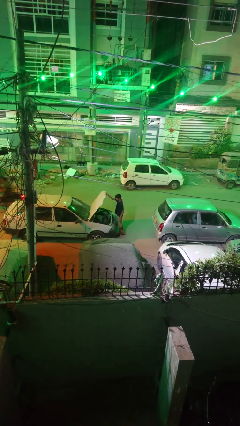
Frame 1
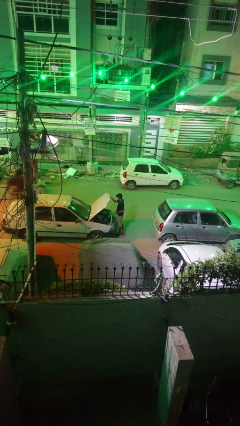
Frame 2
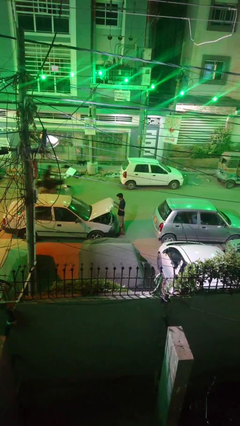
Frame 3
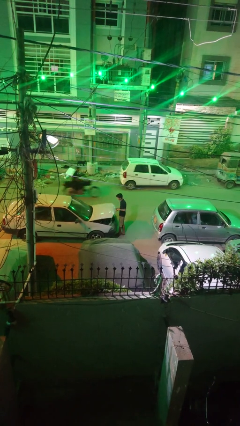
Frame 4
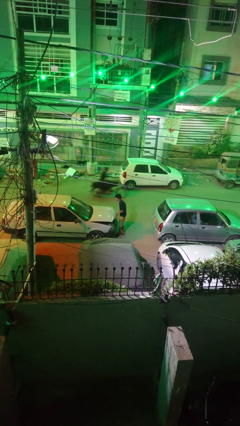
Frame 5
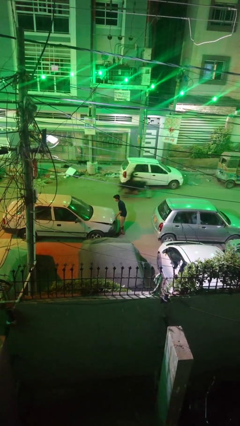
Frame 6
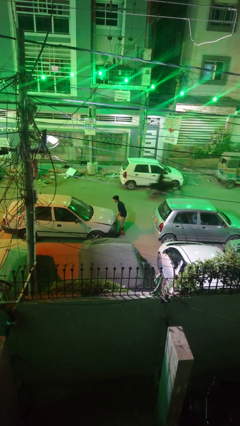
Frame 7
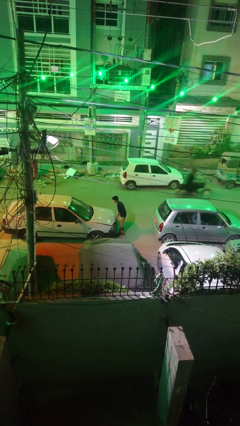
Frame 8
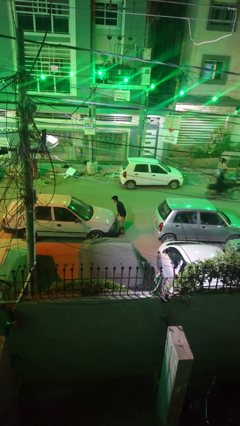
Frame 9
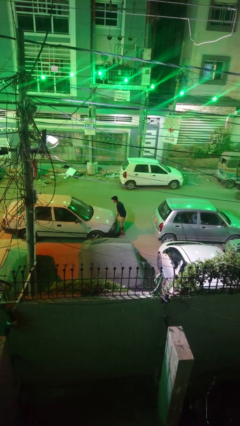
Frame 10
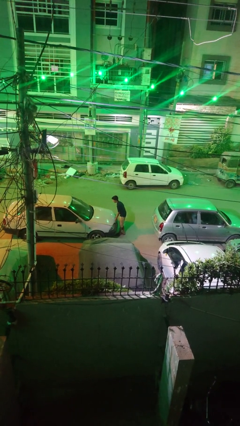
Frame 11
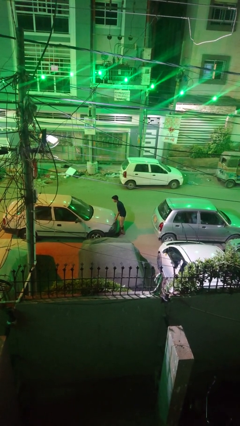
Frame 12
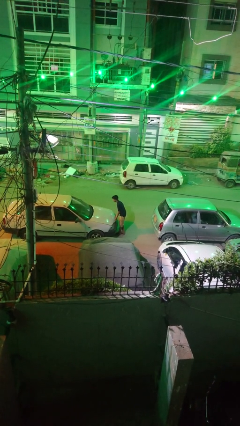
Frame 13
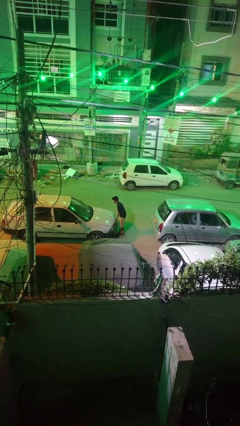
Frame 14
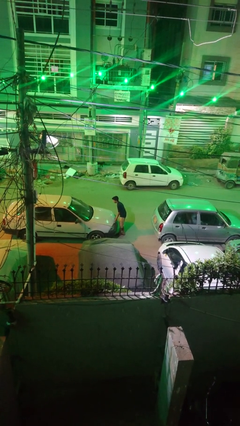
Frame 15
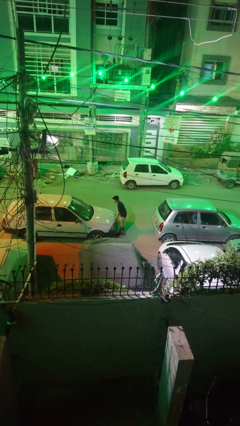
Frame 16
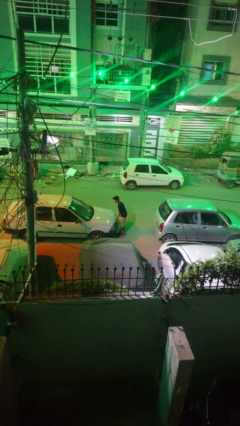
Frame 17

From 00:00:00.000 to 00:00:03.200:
person closes car hood

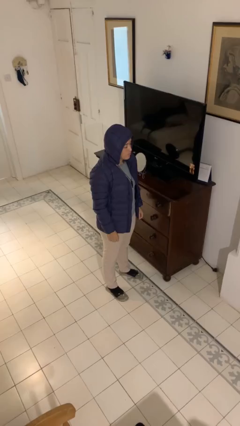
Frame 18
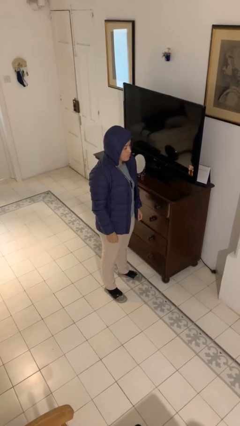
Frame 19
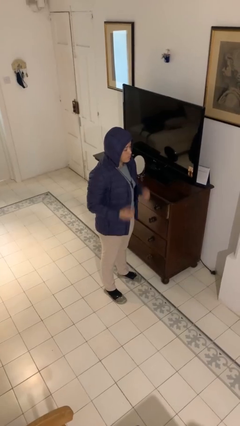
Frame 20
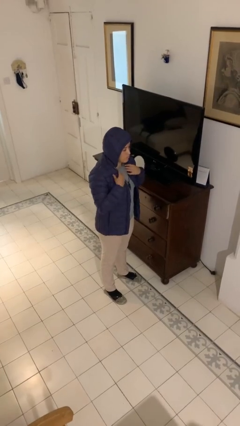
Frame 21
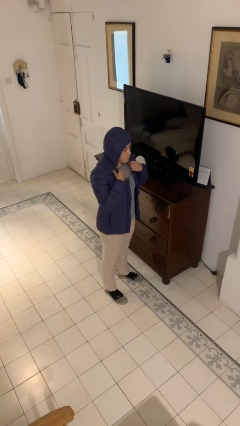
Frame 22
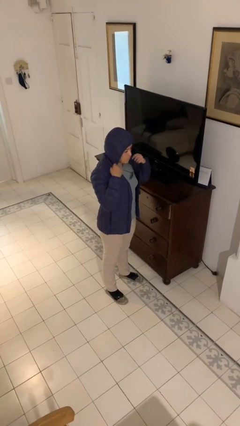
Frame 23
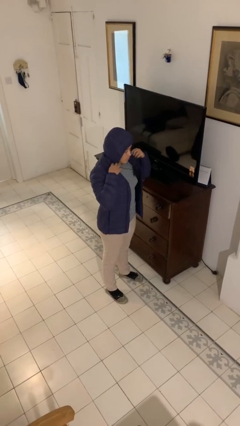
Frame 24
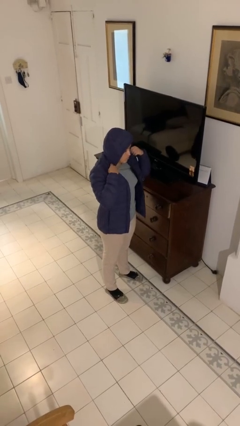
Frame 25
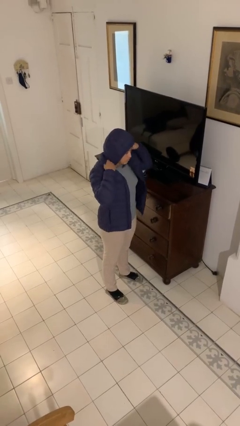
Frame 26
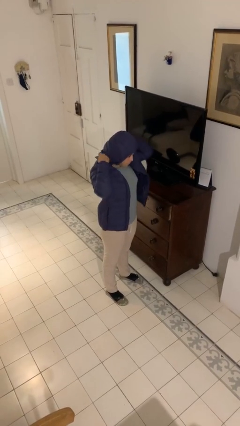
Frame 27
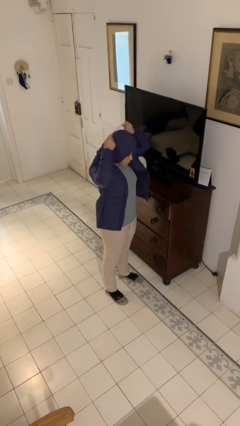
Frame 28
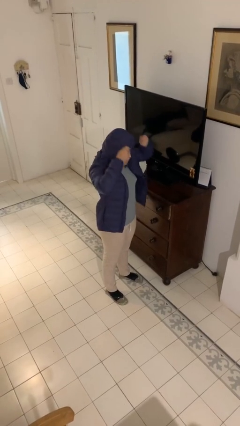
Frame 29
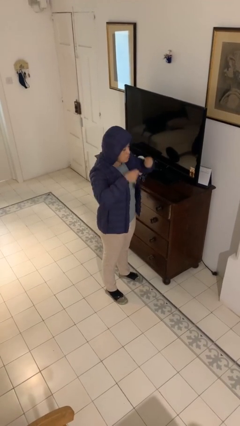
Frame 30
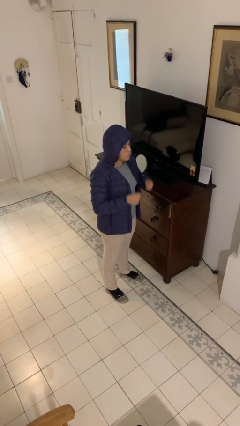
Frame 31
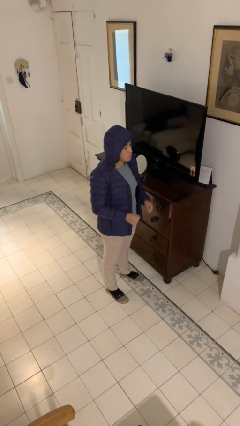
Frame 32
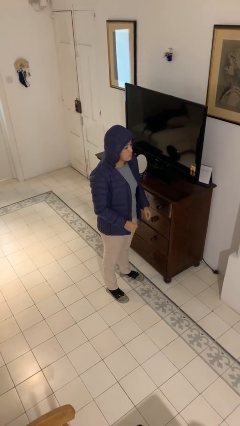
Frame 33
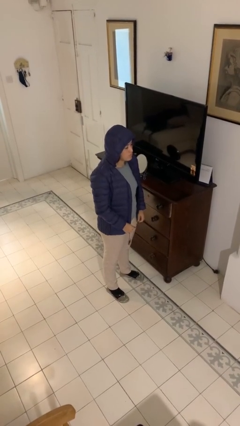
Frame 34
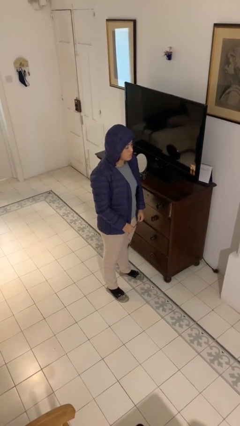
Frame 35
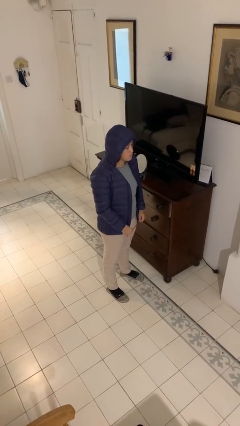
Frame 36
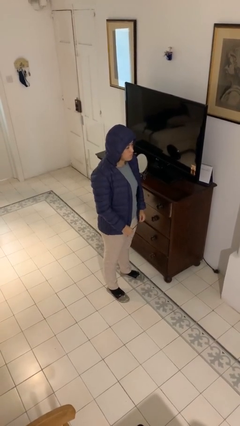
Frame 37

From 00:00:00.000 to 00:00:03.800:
person takes off necklace

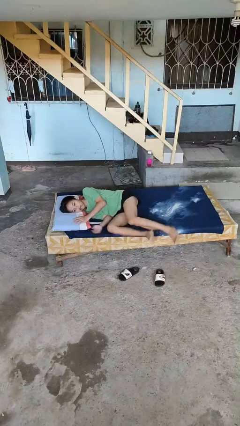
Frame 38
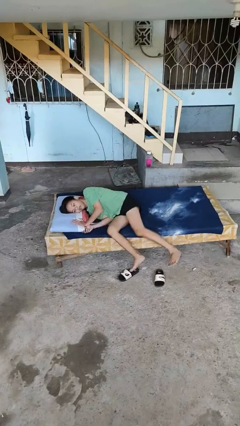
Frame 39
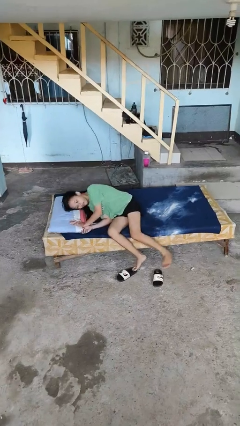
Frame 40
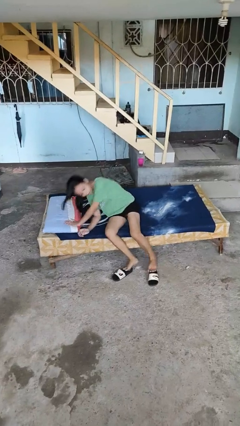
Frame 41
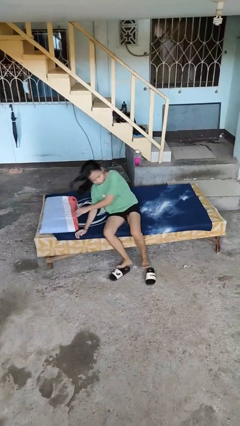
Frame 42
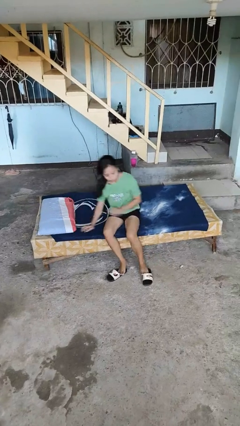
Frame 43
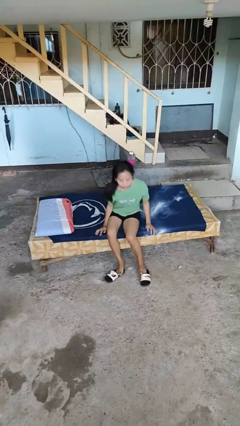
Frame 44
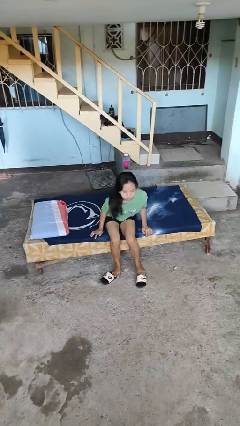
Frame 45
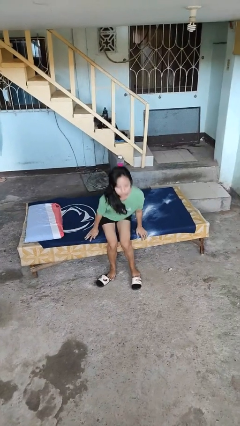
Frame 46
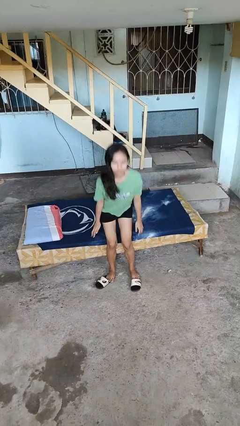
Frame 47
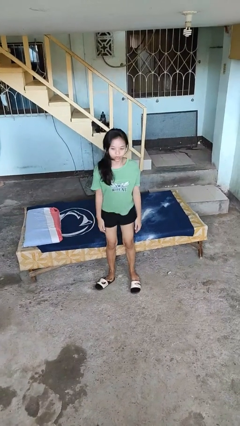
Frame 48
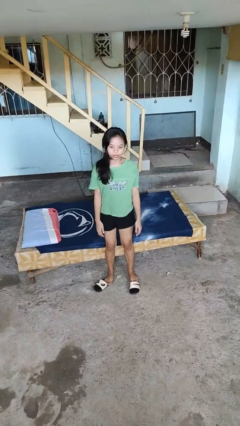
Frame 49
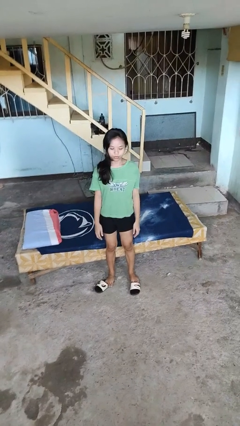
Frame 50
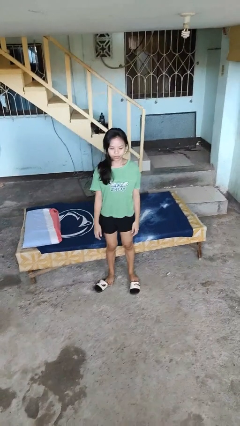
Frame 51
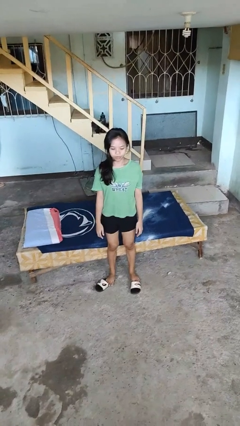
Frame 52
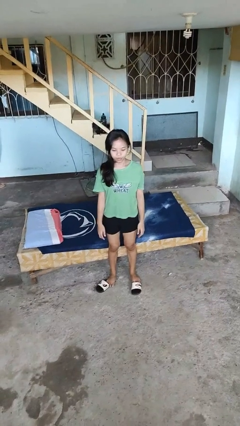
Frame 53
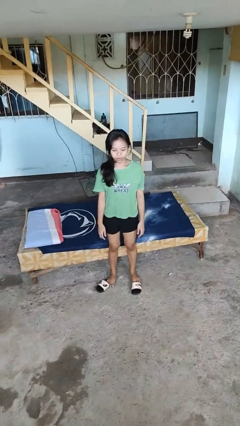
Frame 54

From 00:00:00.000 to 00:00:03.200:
person stands up

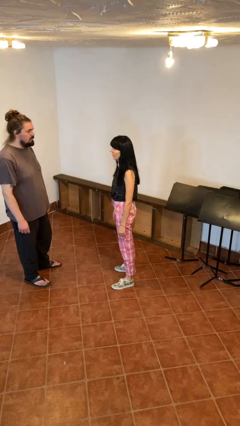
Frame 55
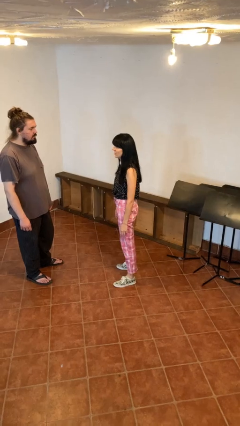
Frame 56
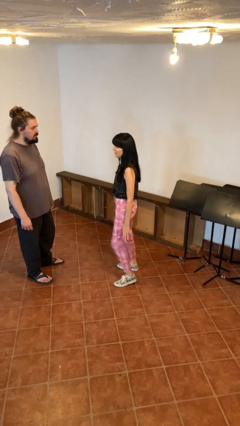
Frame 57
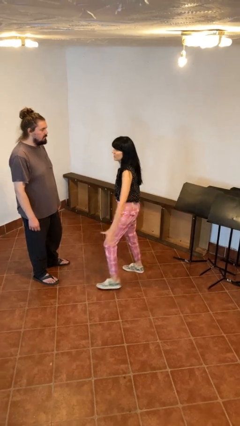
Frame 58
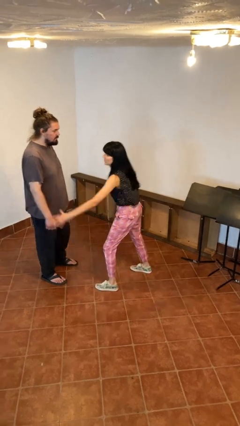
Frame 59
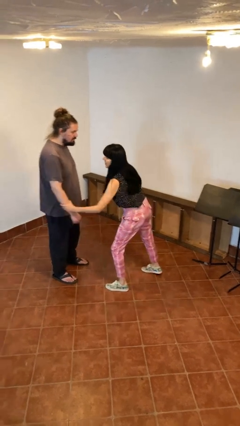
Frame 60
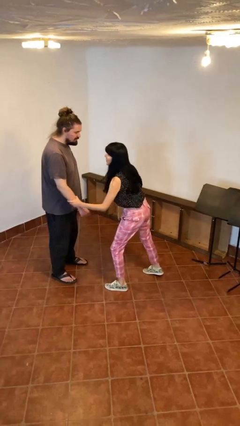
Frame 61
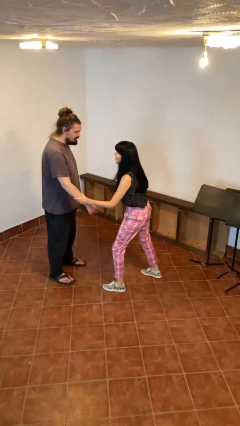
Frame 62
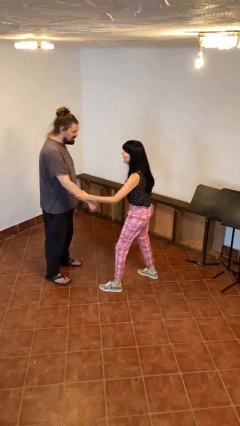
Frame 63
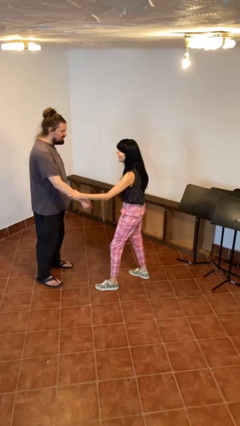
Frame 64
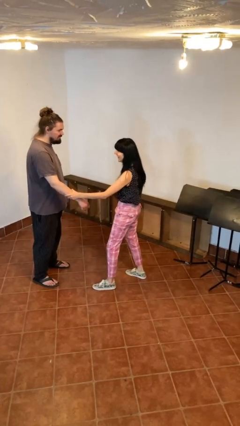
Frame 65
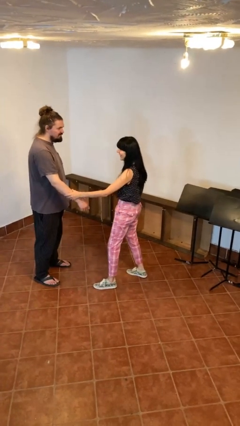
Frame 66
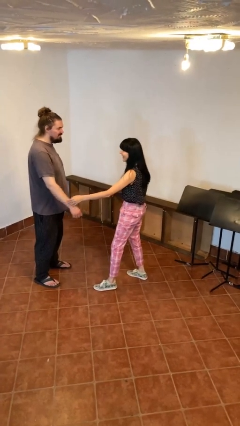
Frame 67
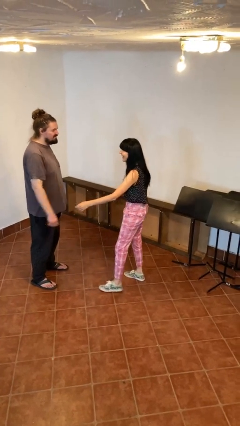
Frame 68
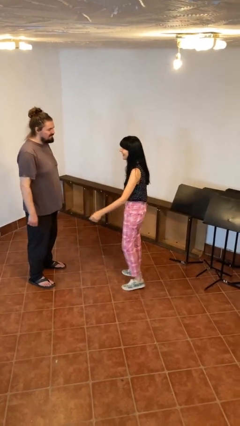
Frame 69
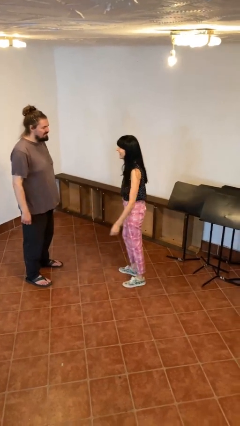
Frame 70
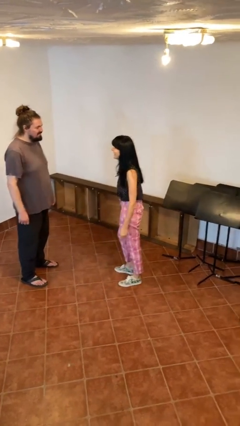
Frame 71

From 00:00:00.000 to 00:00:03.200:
person grabs person by forearm

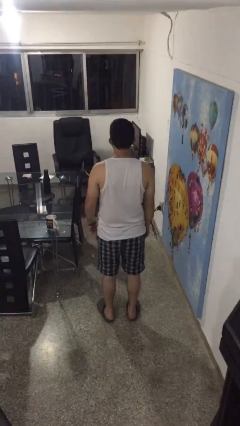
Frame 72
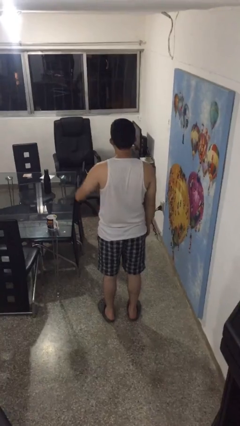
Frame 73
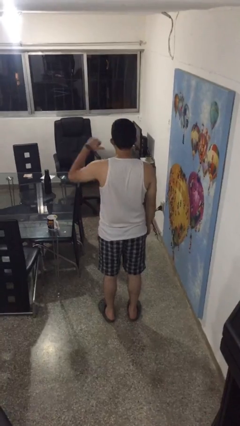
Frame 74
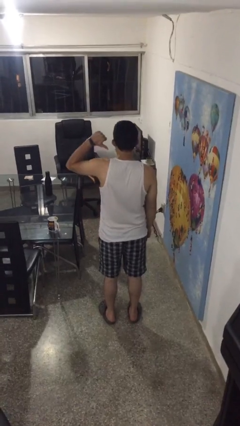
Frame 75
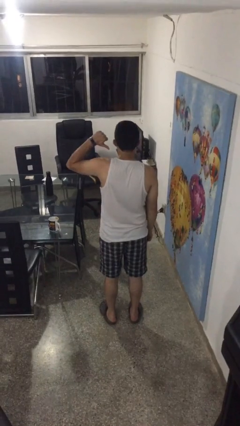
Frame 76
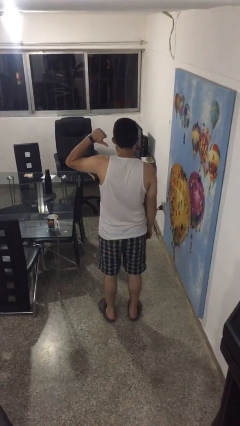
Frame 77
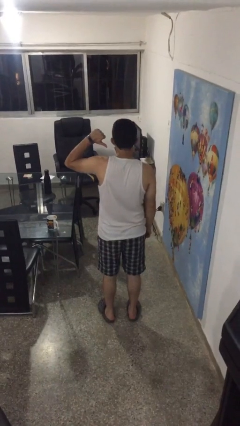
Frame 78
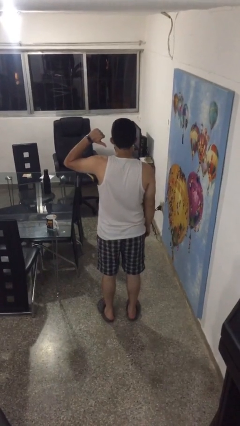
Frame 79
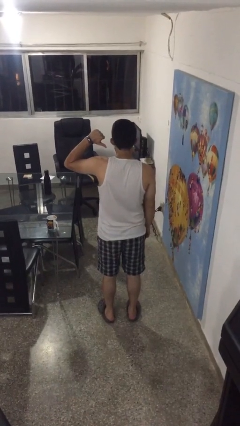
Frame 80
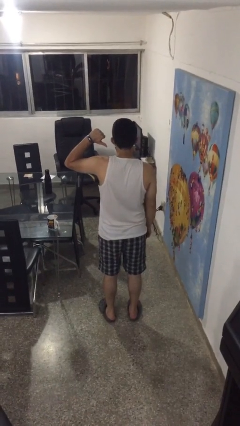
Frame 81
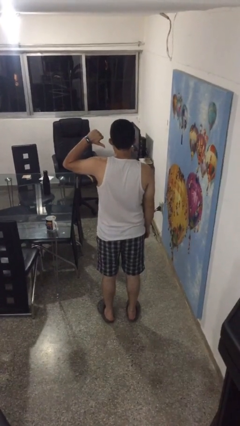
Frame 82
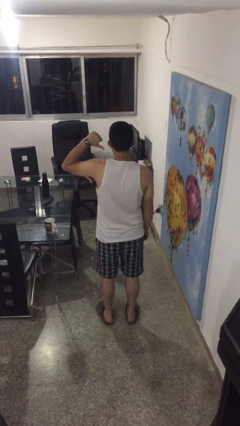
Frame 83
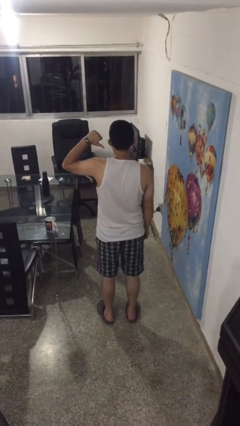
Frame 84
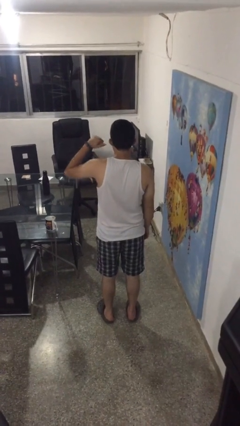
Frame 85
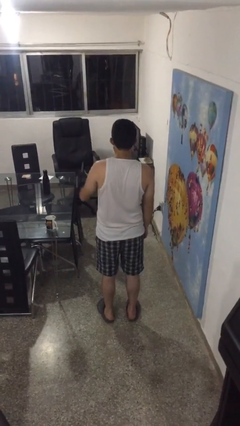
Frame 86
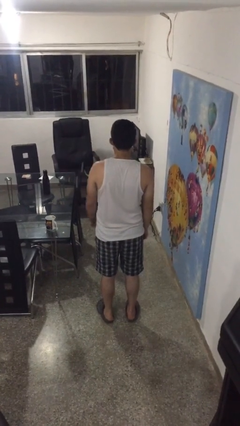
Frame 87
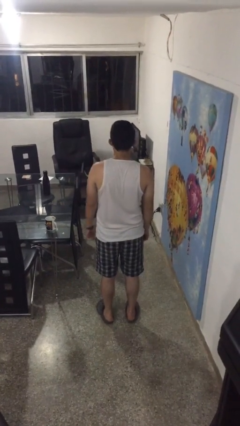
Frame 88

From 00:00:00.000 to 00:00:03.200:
person gestures thumbs down

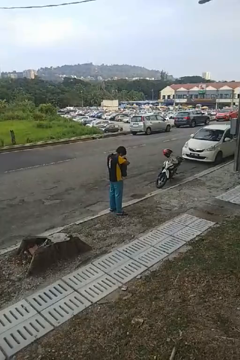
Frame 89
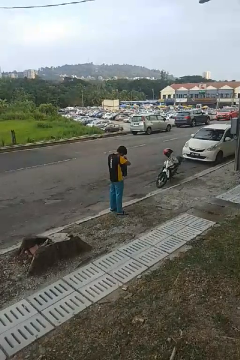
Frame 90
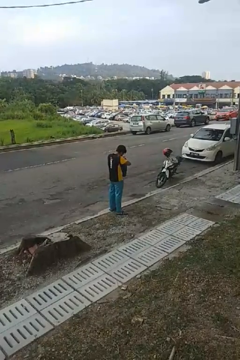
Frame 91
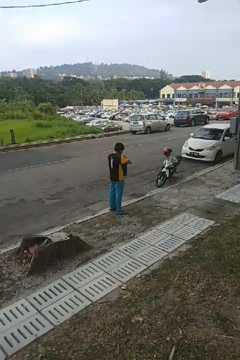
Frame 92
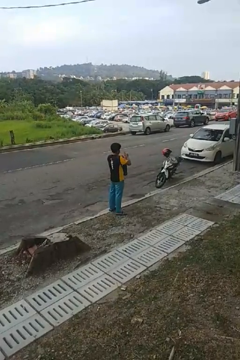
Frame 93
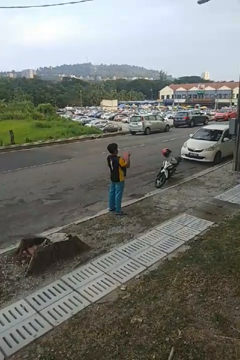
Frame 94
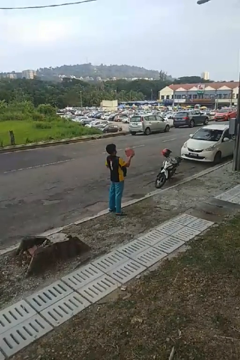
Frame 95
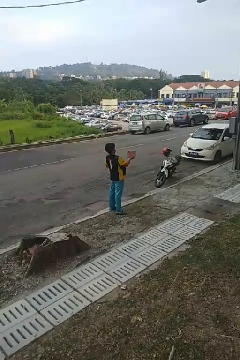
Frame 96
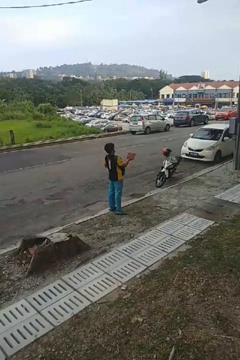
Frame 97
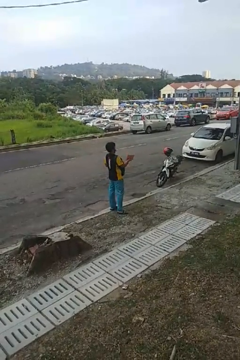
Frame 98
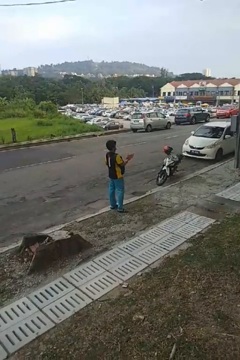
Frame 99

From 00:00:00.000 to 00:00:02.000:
person takes object from backpack
